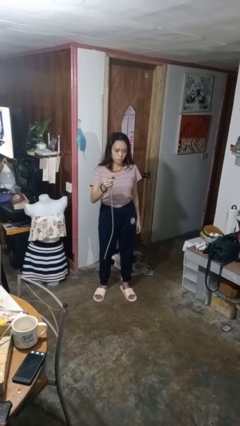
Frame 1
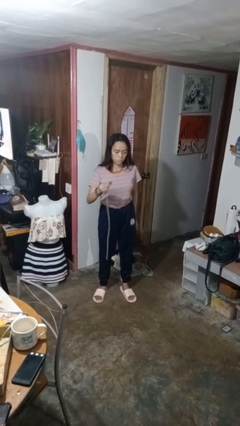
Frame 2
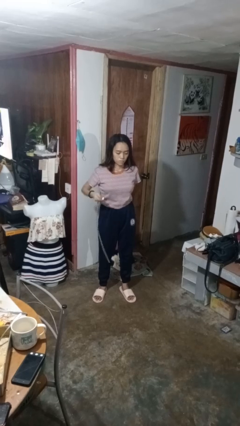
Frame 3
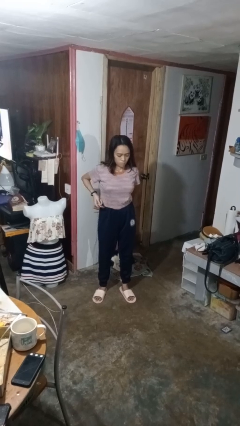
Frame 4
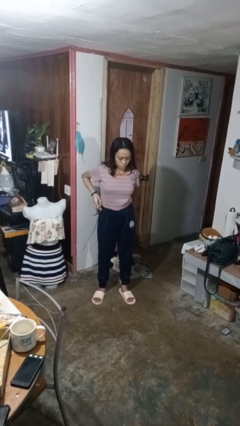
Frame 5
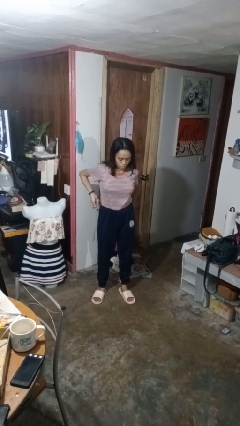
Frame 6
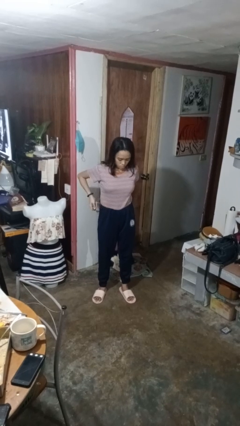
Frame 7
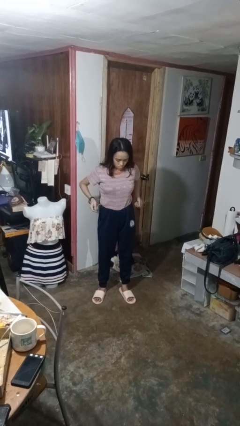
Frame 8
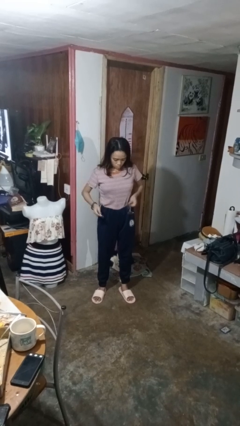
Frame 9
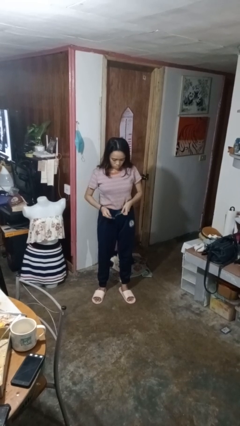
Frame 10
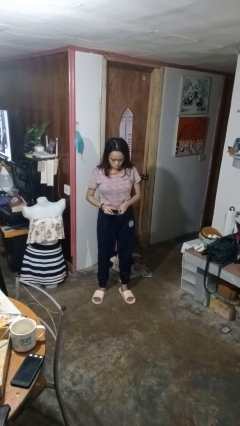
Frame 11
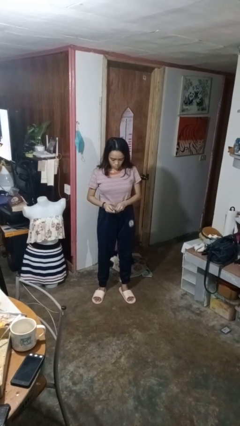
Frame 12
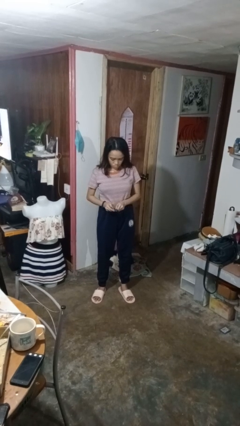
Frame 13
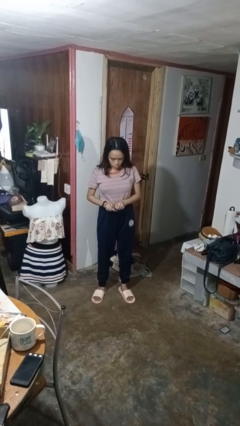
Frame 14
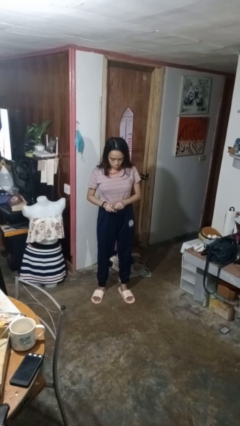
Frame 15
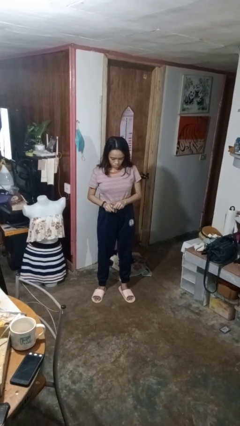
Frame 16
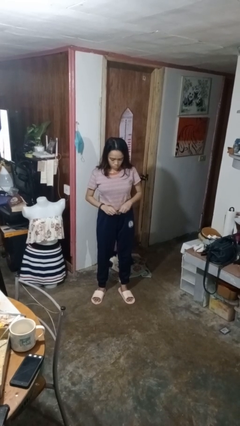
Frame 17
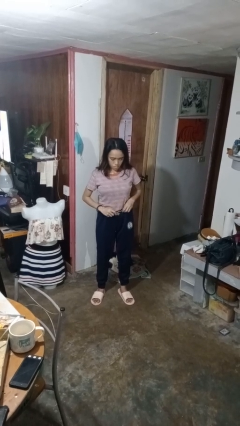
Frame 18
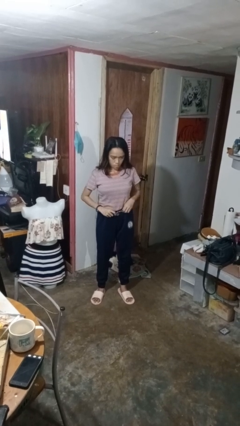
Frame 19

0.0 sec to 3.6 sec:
person puts on belt

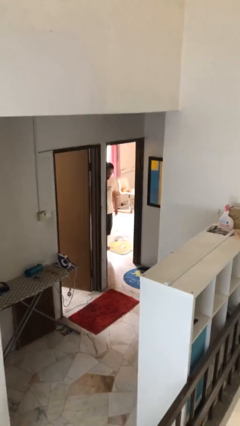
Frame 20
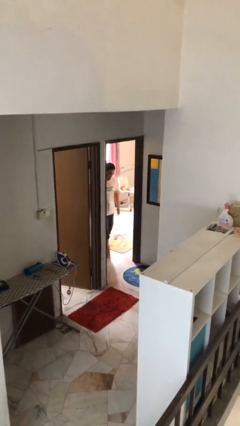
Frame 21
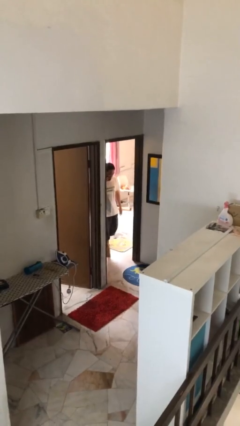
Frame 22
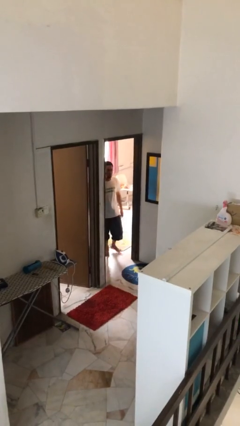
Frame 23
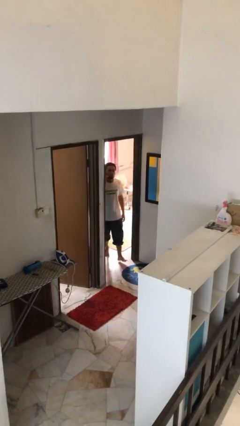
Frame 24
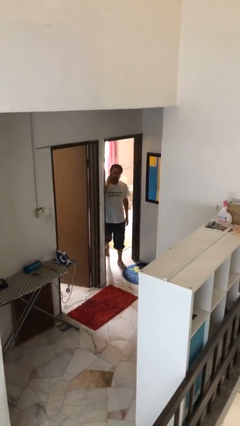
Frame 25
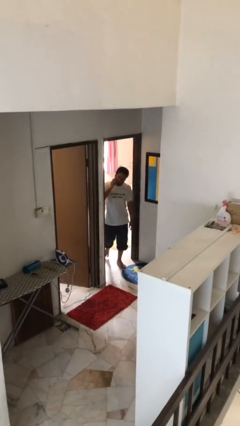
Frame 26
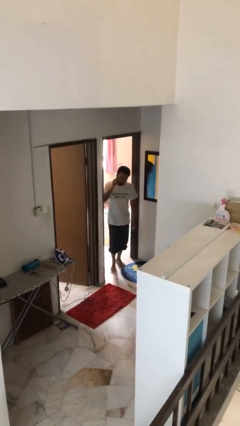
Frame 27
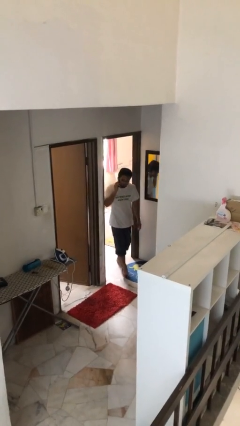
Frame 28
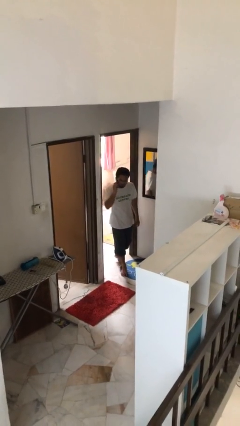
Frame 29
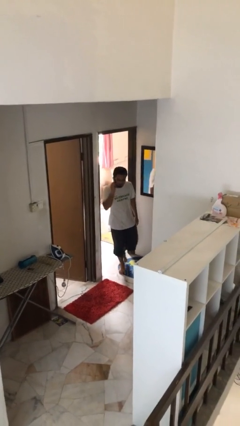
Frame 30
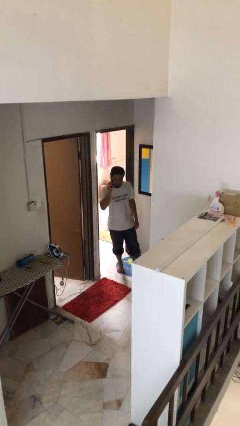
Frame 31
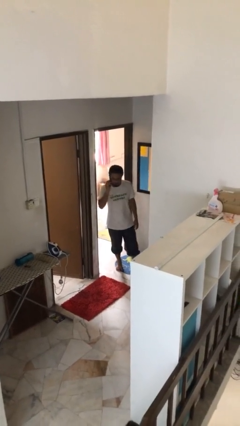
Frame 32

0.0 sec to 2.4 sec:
person enters scene through structure

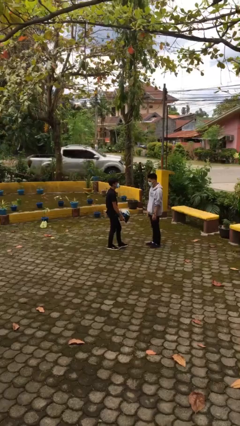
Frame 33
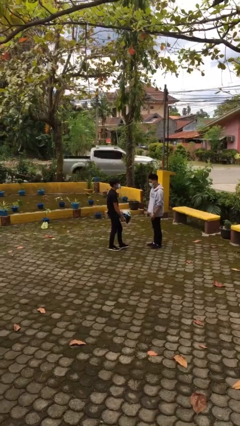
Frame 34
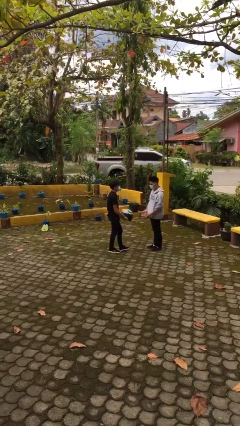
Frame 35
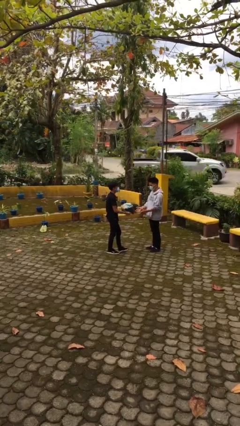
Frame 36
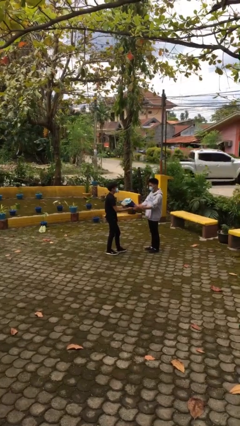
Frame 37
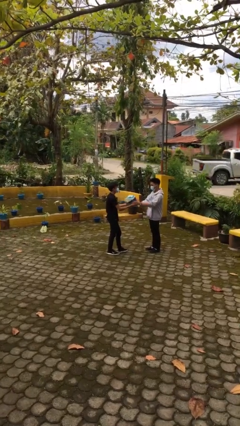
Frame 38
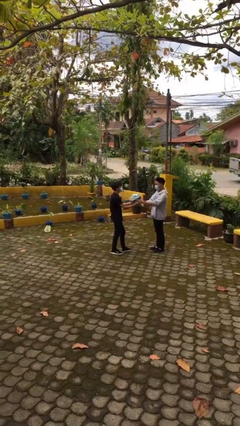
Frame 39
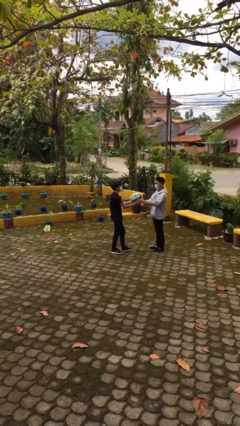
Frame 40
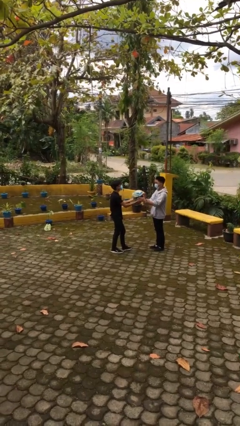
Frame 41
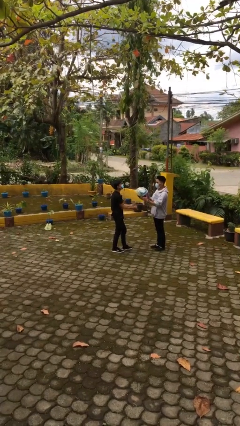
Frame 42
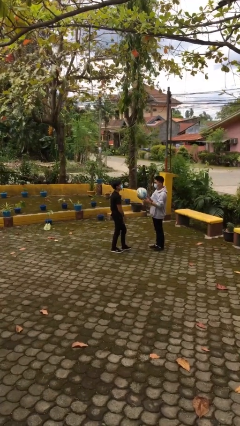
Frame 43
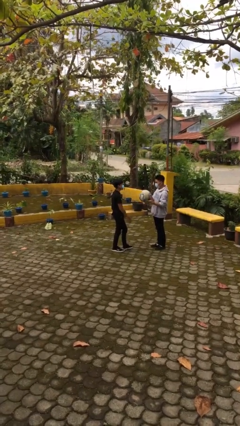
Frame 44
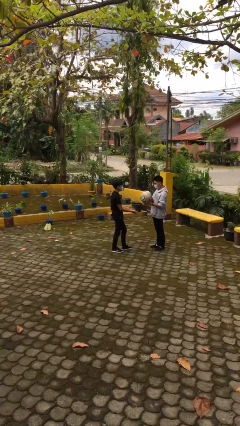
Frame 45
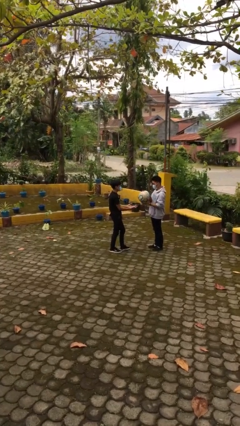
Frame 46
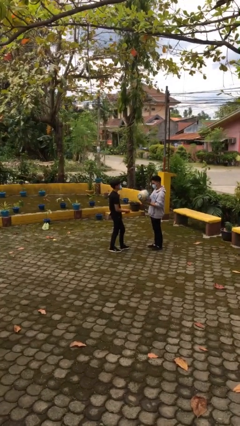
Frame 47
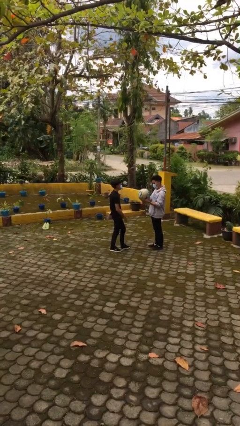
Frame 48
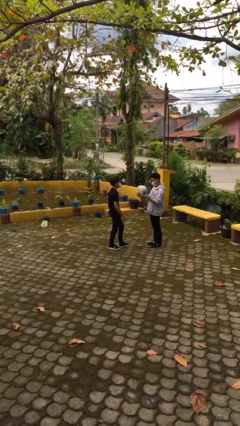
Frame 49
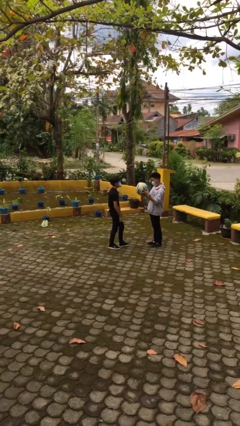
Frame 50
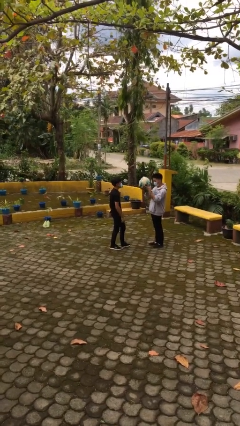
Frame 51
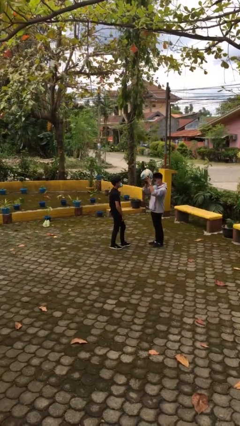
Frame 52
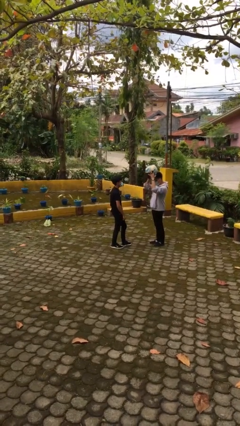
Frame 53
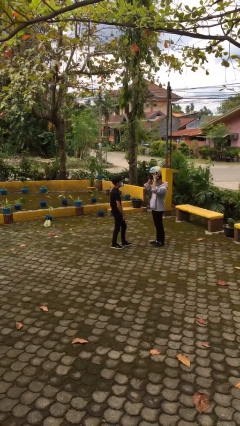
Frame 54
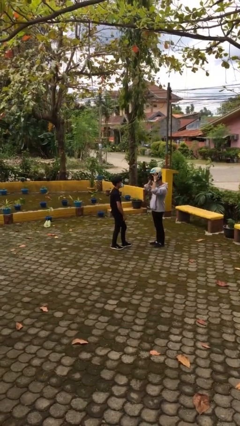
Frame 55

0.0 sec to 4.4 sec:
person transfers object to person

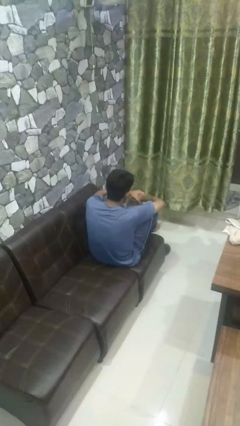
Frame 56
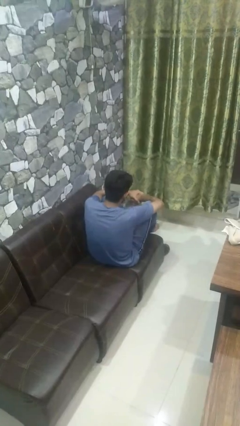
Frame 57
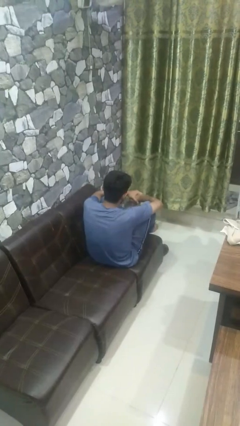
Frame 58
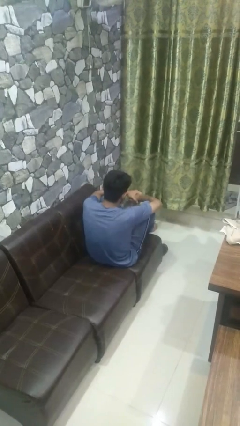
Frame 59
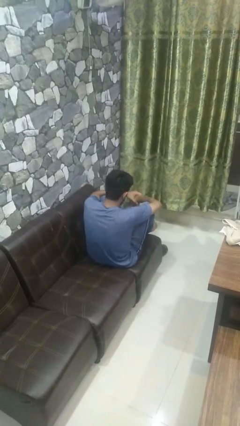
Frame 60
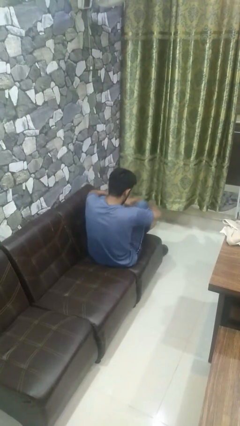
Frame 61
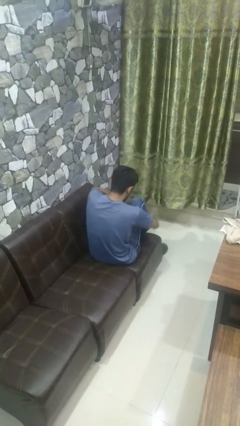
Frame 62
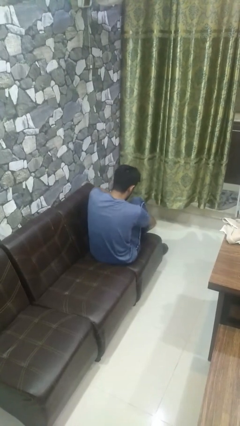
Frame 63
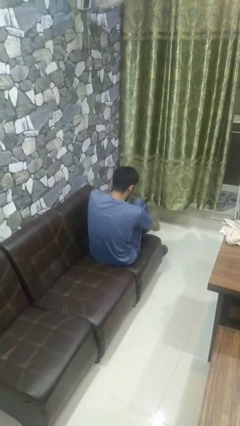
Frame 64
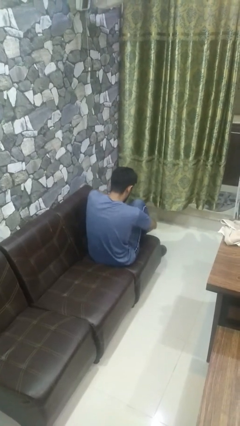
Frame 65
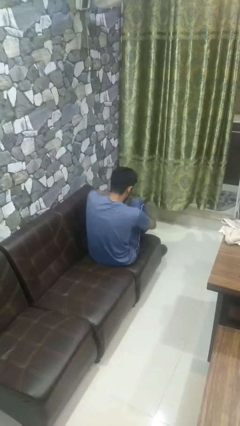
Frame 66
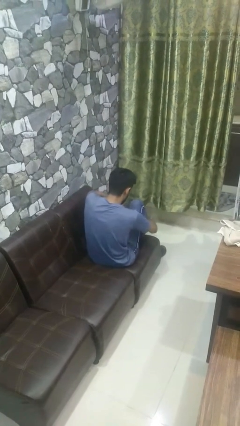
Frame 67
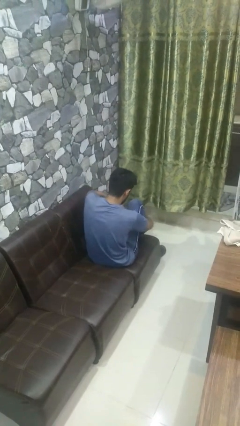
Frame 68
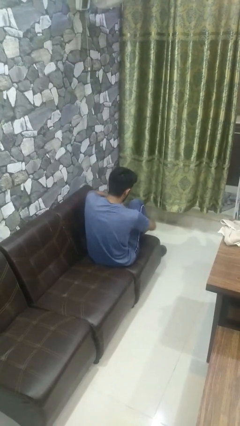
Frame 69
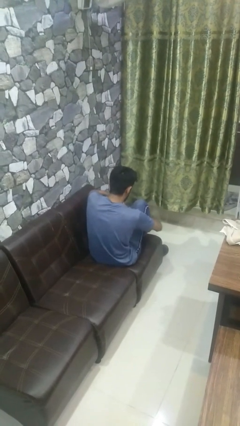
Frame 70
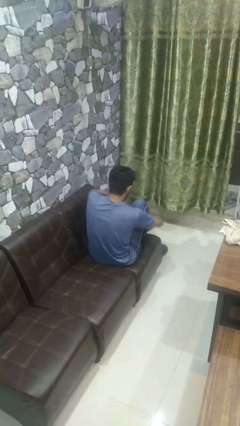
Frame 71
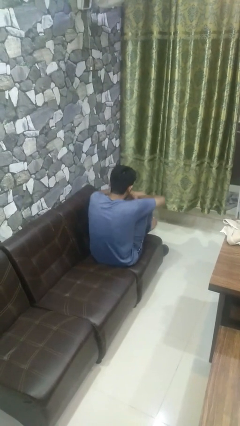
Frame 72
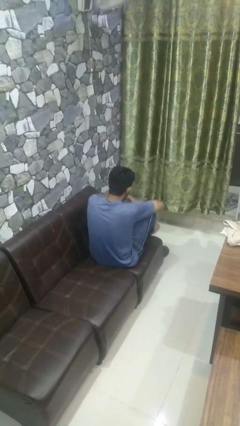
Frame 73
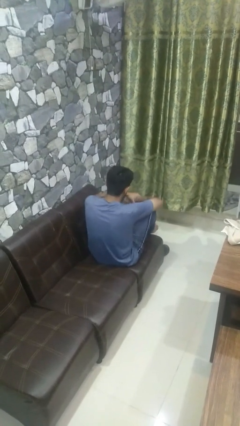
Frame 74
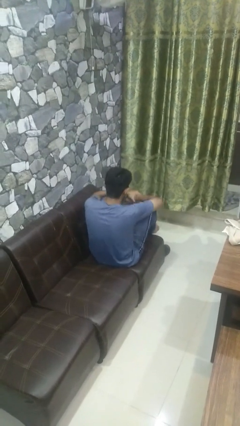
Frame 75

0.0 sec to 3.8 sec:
person rubs foot

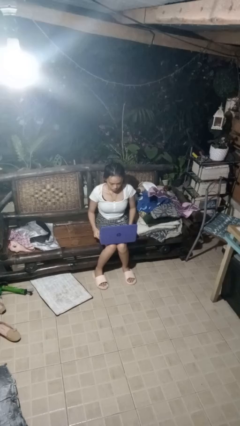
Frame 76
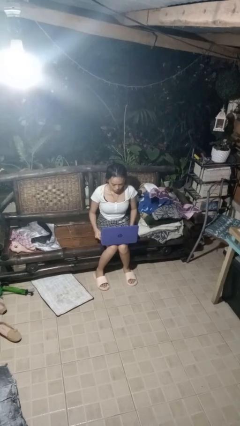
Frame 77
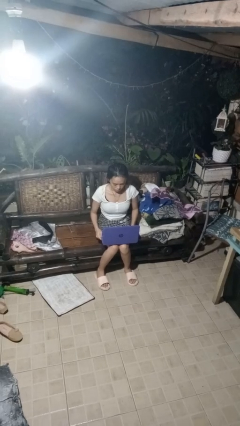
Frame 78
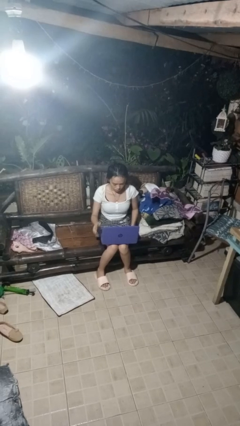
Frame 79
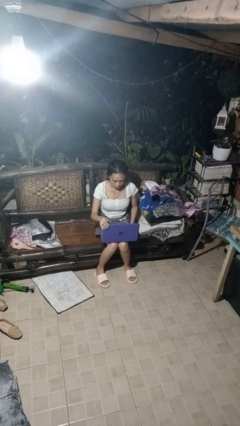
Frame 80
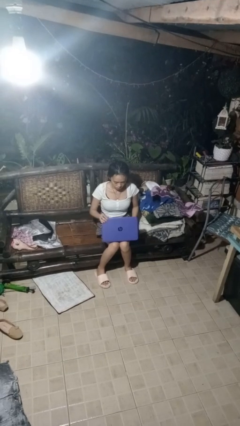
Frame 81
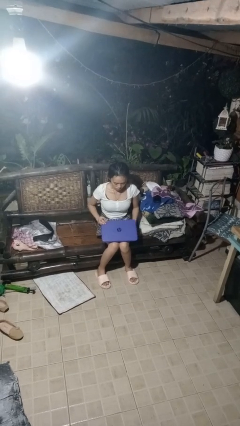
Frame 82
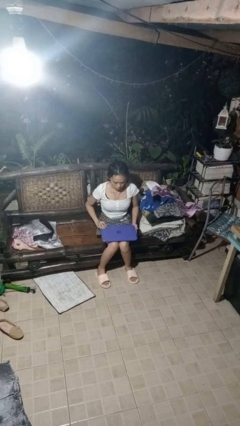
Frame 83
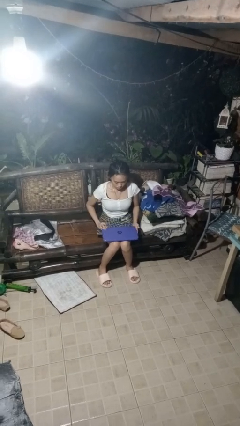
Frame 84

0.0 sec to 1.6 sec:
person closes laptop

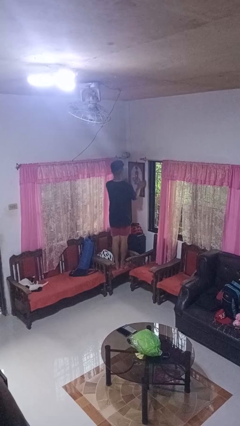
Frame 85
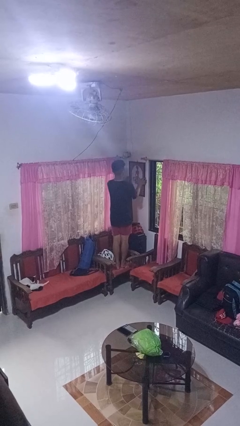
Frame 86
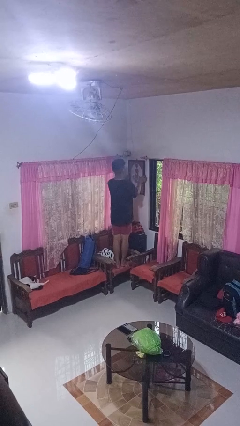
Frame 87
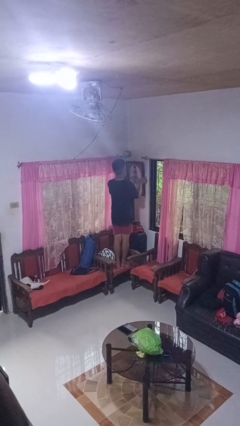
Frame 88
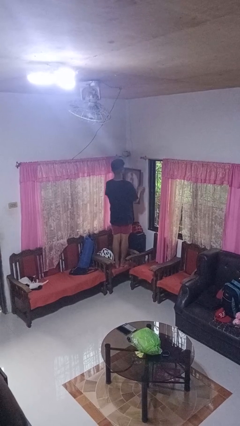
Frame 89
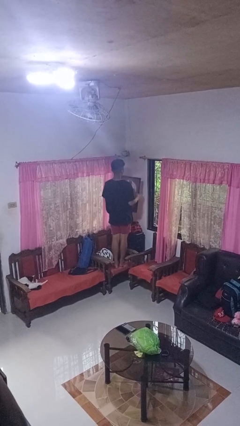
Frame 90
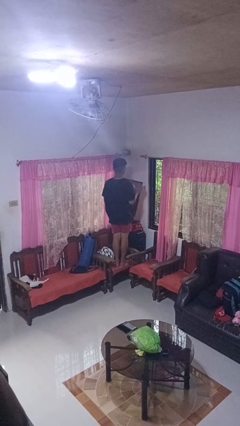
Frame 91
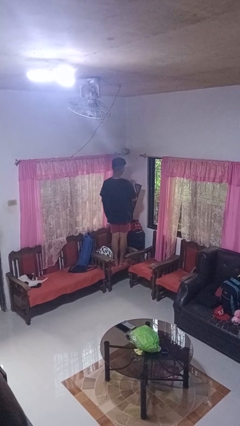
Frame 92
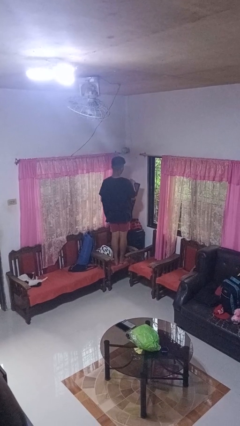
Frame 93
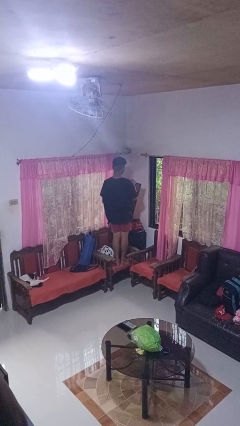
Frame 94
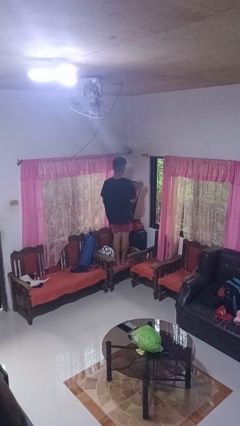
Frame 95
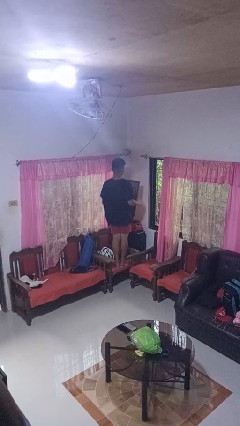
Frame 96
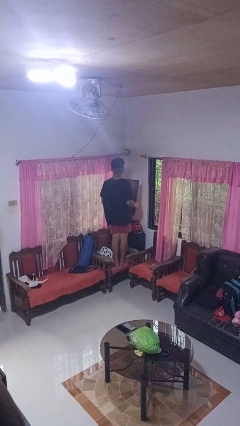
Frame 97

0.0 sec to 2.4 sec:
person takes down picture frame
